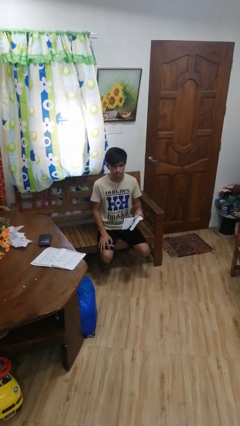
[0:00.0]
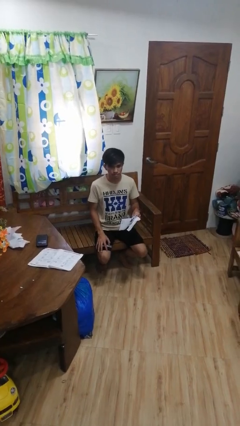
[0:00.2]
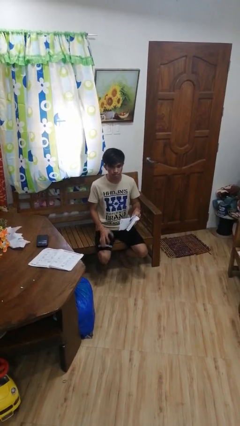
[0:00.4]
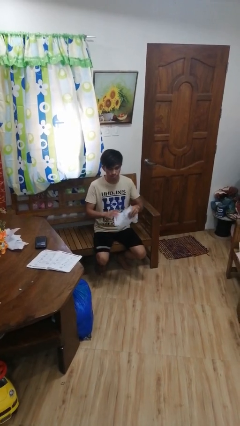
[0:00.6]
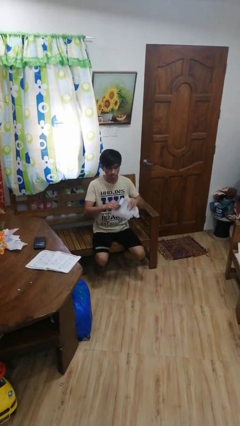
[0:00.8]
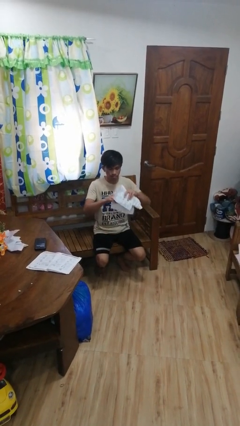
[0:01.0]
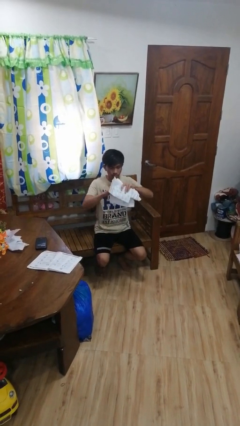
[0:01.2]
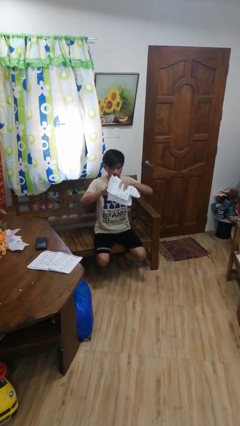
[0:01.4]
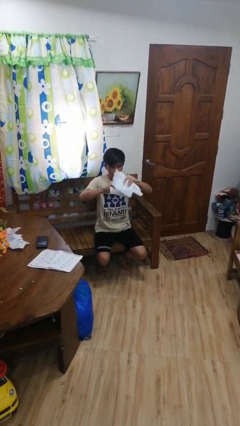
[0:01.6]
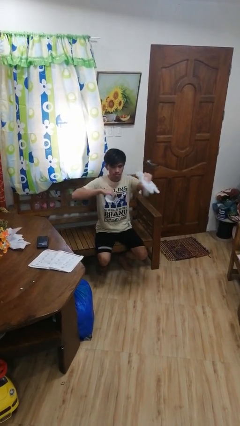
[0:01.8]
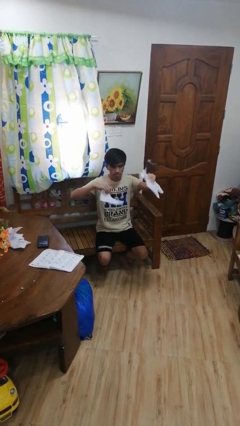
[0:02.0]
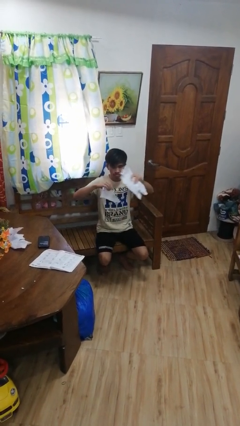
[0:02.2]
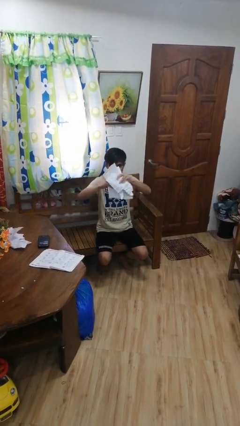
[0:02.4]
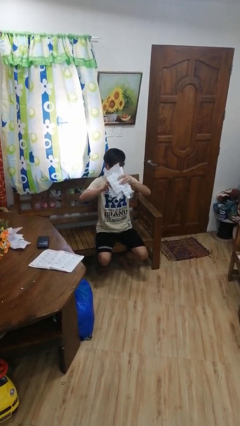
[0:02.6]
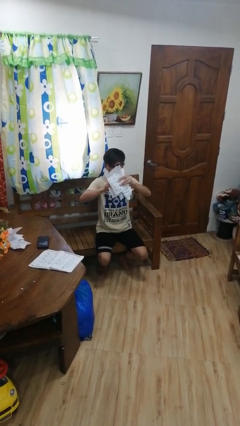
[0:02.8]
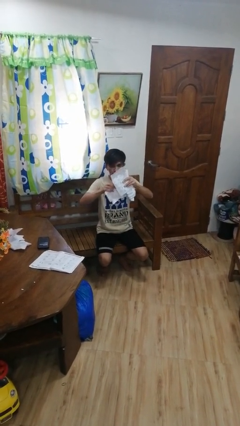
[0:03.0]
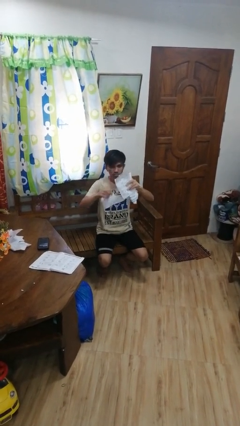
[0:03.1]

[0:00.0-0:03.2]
person tears paper

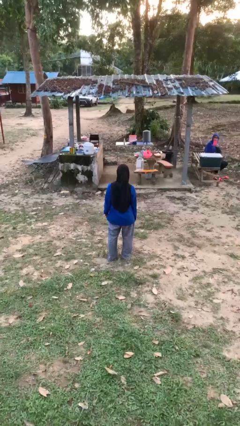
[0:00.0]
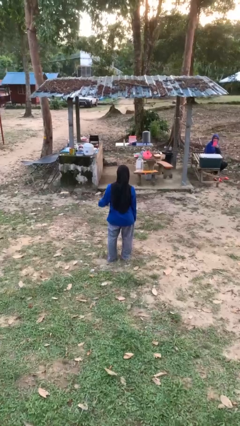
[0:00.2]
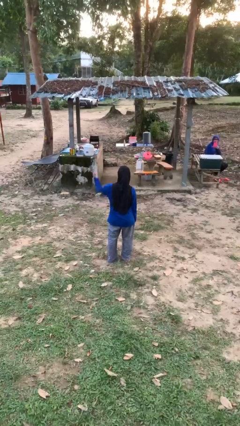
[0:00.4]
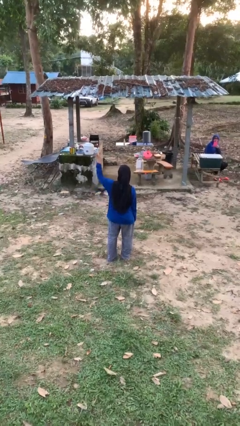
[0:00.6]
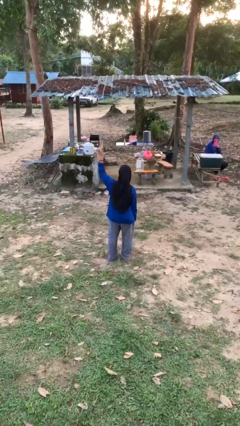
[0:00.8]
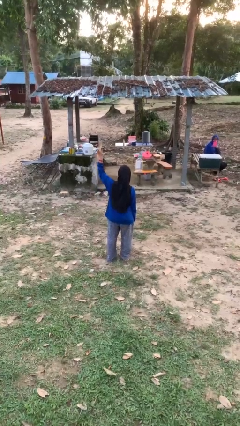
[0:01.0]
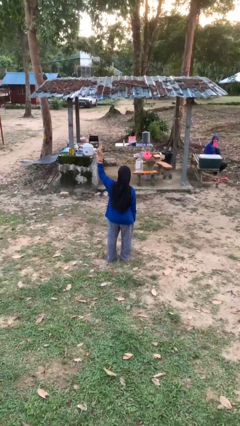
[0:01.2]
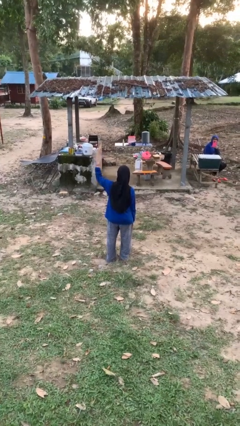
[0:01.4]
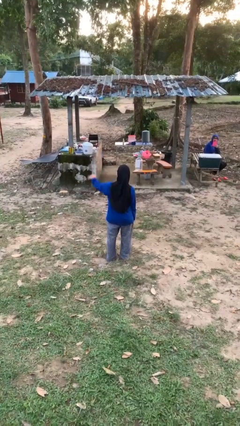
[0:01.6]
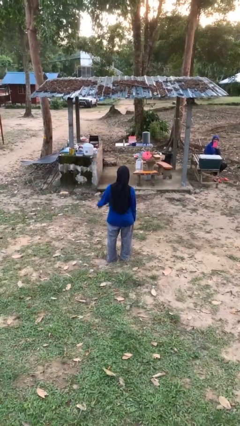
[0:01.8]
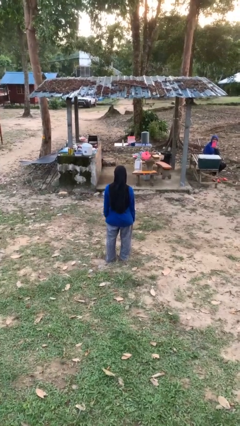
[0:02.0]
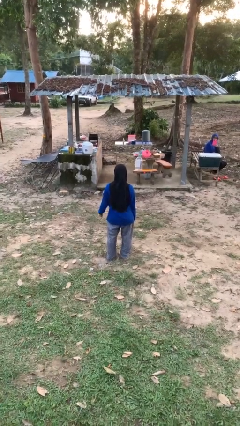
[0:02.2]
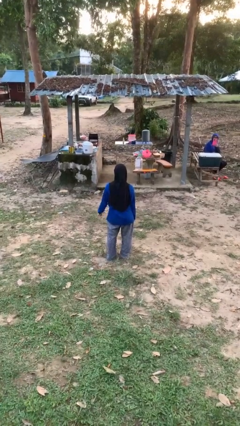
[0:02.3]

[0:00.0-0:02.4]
person gestures number five

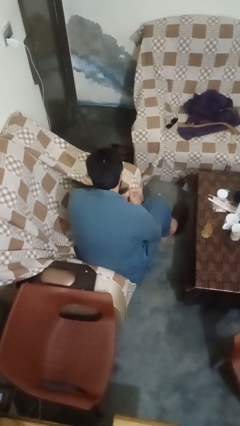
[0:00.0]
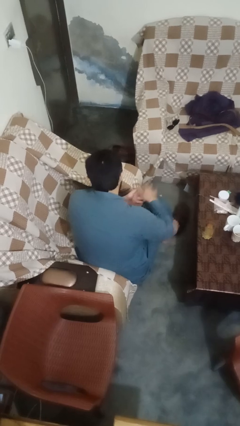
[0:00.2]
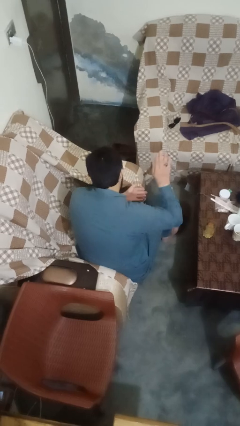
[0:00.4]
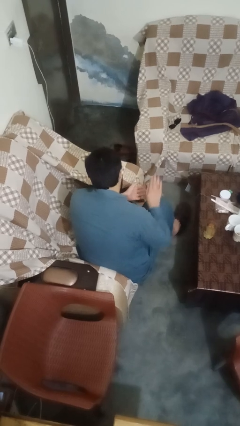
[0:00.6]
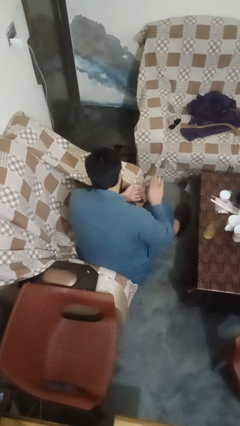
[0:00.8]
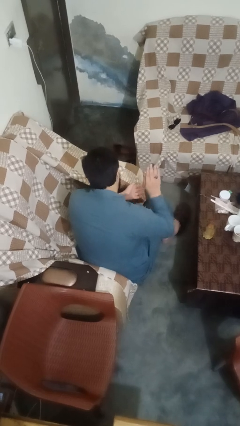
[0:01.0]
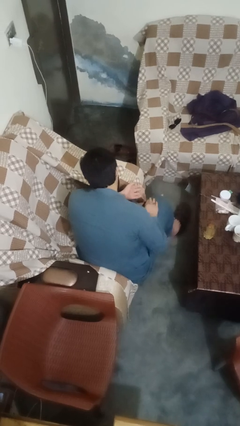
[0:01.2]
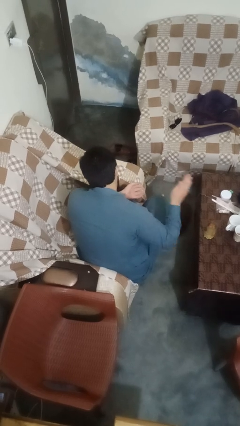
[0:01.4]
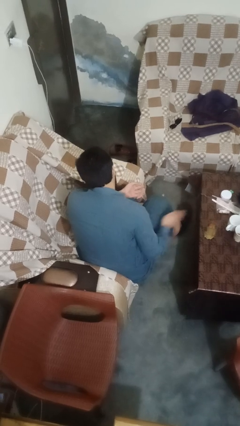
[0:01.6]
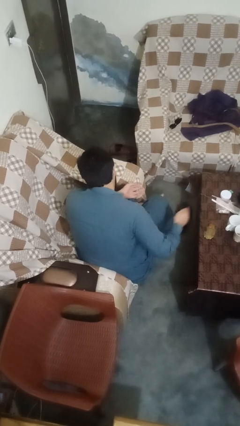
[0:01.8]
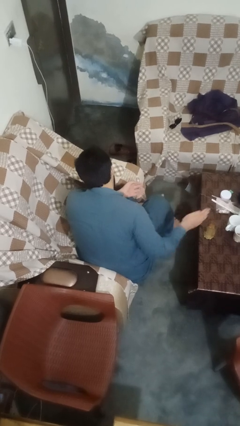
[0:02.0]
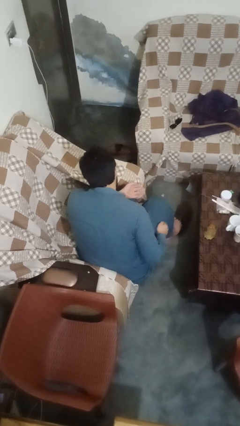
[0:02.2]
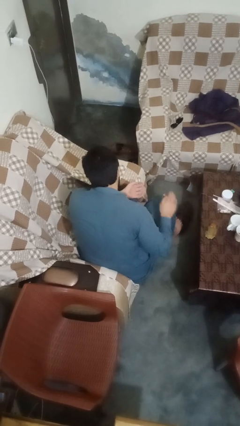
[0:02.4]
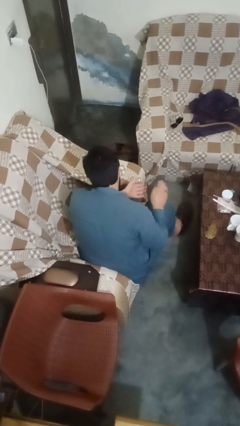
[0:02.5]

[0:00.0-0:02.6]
person slaps hands on thighs

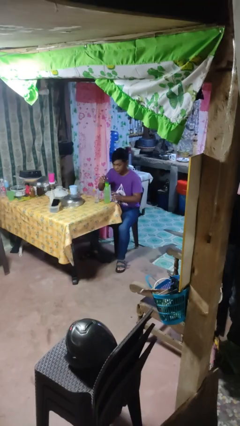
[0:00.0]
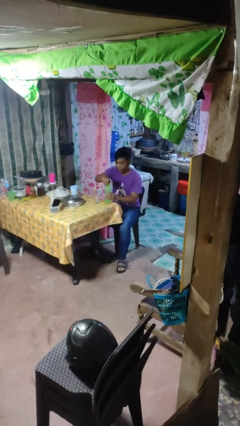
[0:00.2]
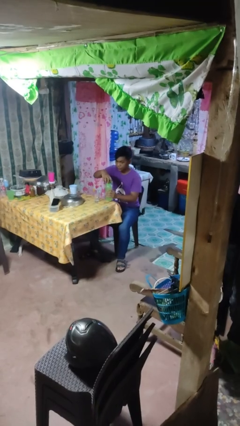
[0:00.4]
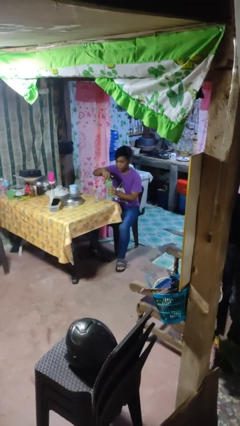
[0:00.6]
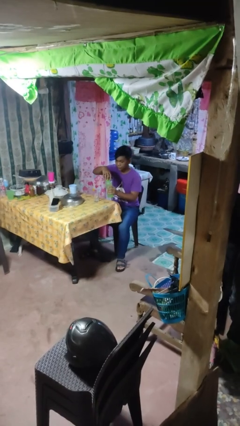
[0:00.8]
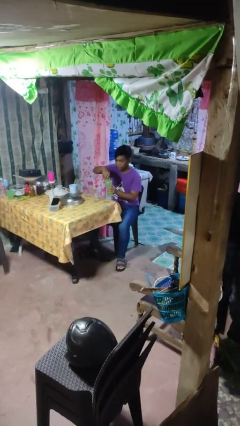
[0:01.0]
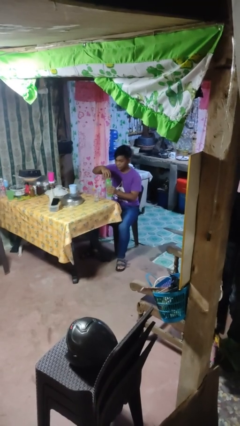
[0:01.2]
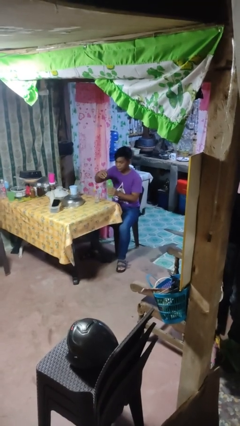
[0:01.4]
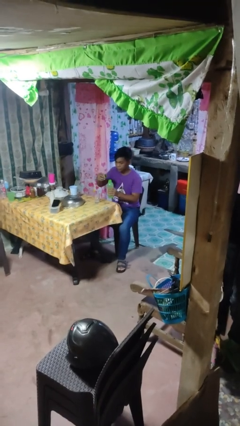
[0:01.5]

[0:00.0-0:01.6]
person unscrews lid from bottle

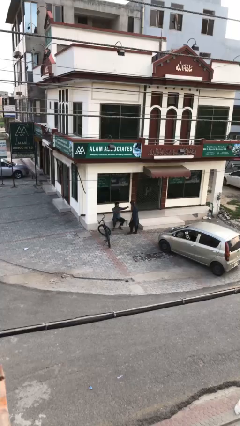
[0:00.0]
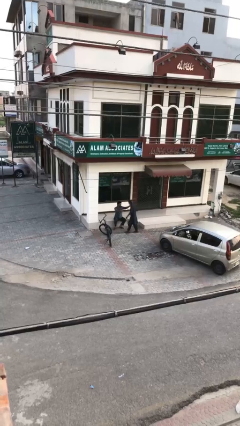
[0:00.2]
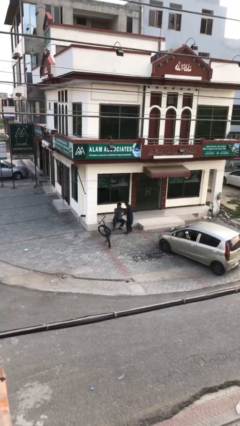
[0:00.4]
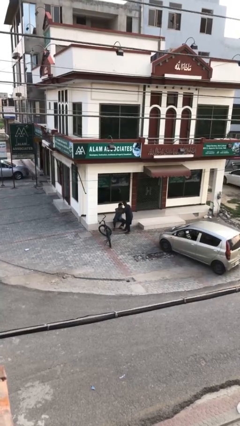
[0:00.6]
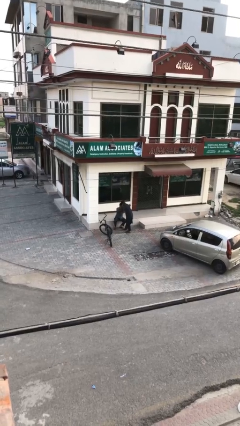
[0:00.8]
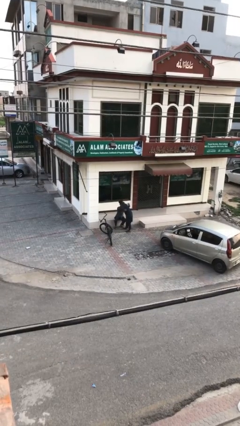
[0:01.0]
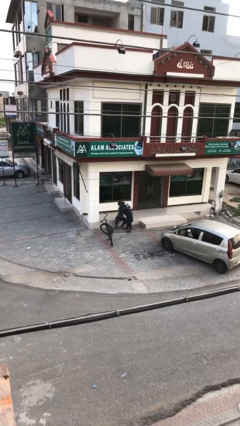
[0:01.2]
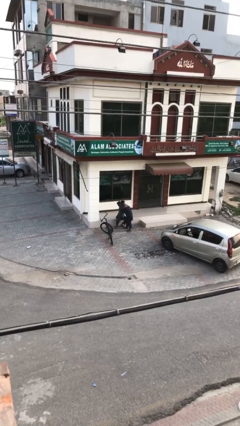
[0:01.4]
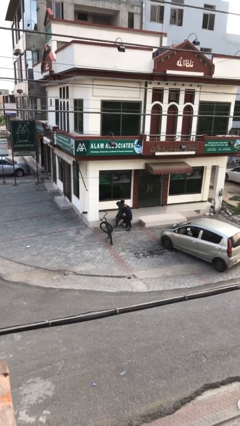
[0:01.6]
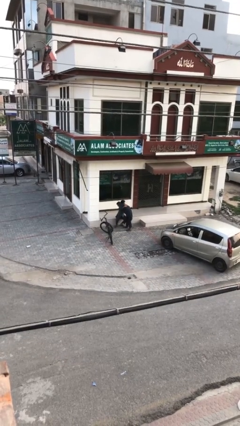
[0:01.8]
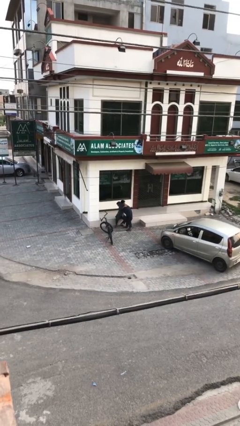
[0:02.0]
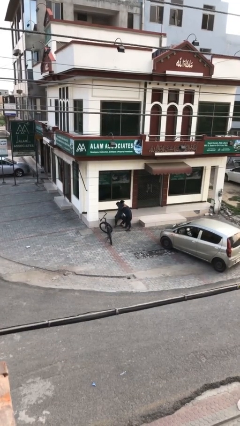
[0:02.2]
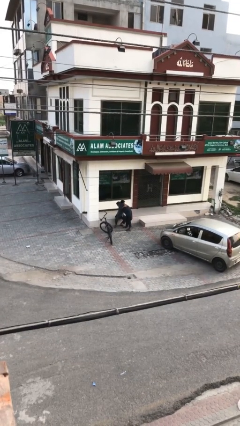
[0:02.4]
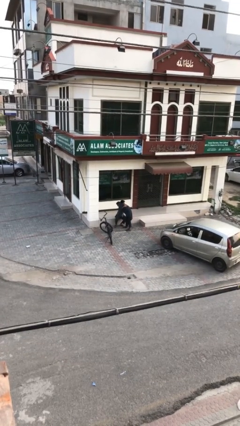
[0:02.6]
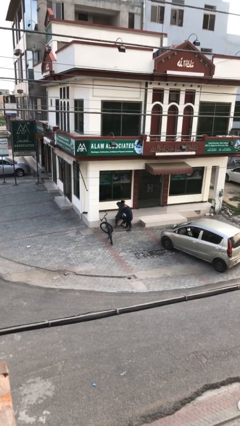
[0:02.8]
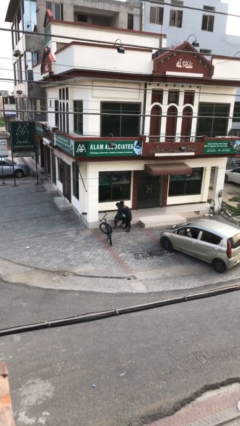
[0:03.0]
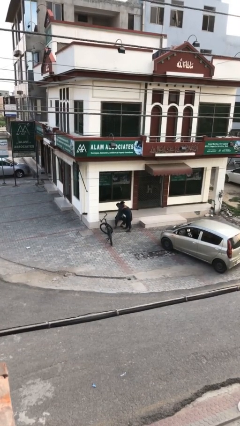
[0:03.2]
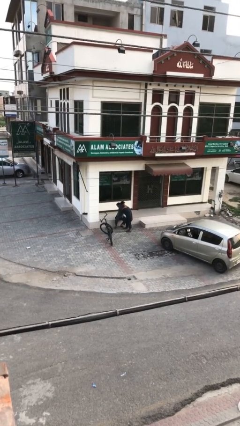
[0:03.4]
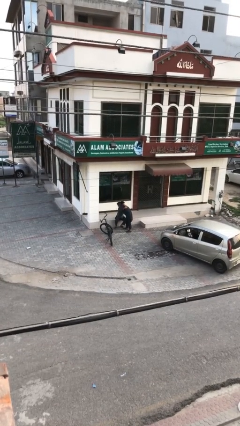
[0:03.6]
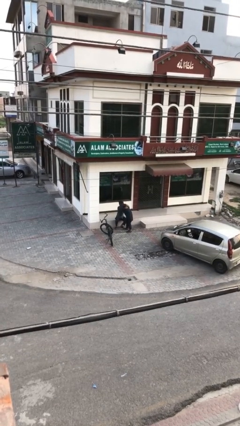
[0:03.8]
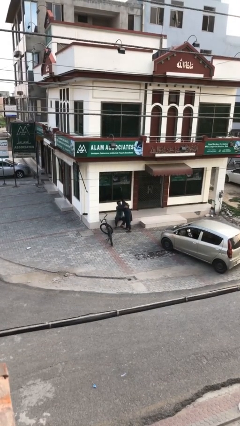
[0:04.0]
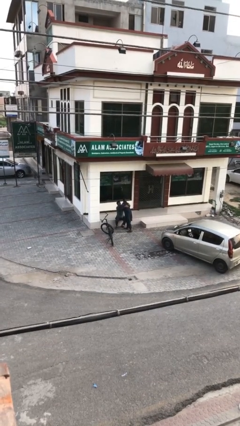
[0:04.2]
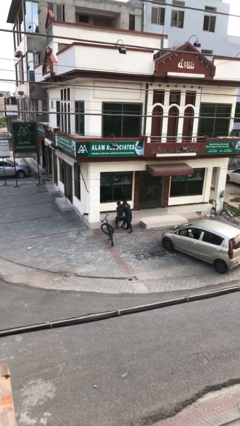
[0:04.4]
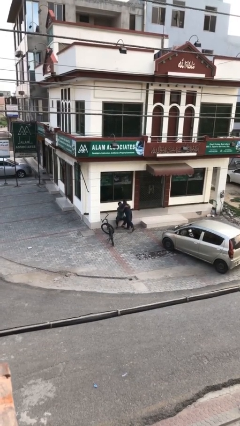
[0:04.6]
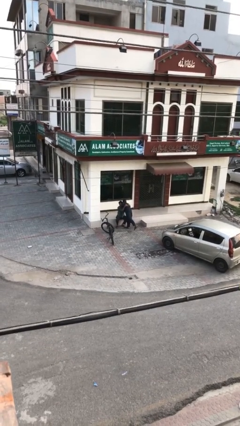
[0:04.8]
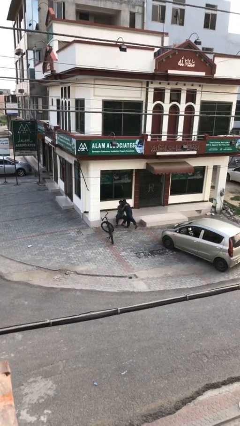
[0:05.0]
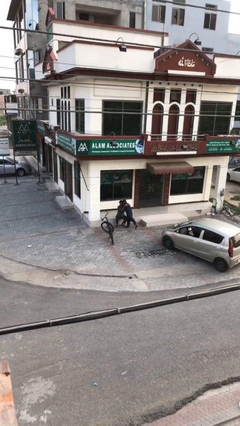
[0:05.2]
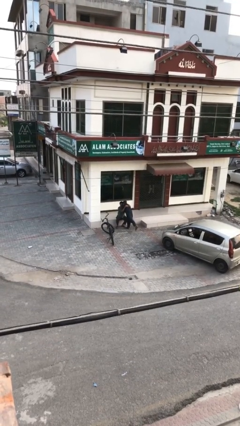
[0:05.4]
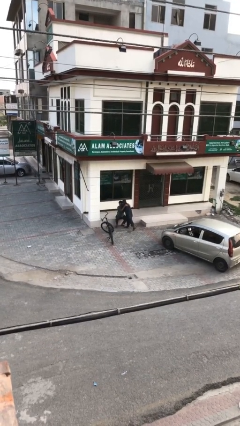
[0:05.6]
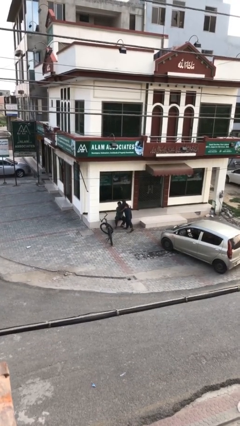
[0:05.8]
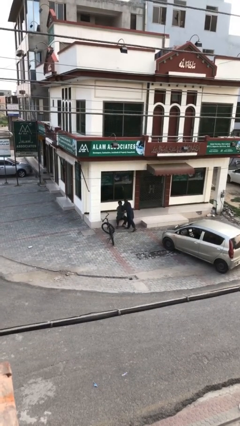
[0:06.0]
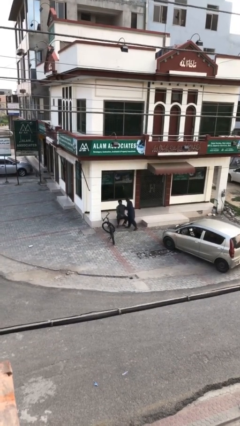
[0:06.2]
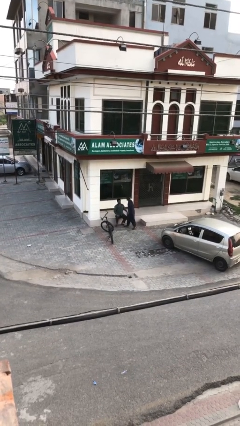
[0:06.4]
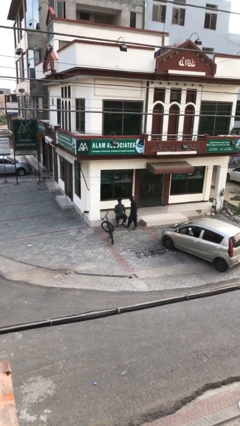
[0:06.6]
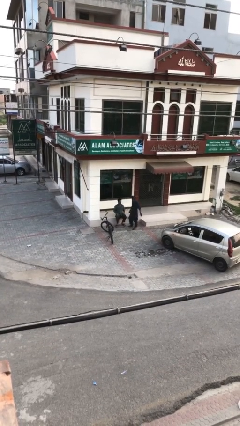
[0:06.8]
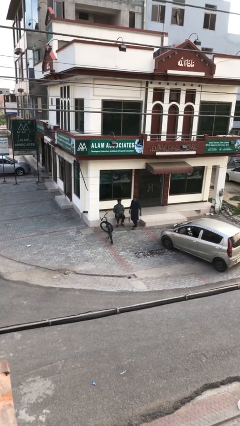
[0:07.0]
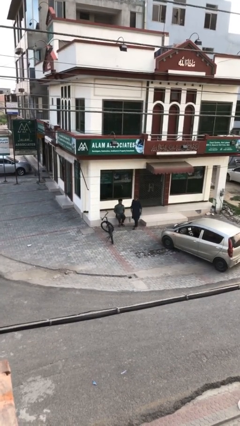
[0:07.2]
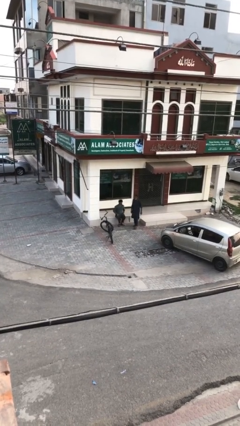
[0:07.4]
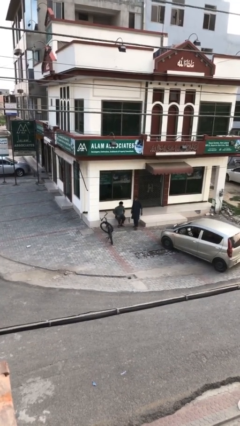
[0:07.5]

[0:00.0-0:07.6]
person embraces person
